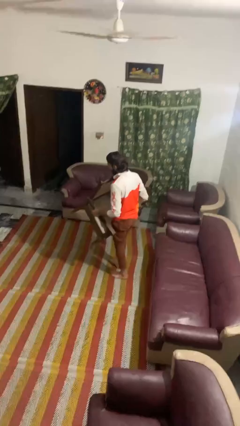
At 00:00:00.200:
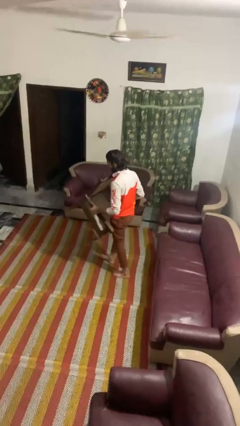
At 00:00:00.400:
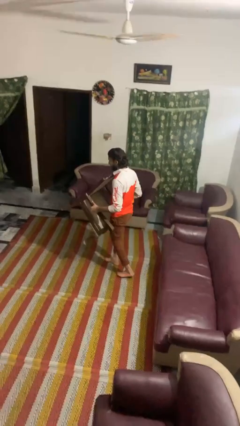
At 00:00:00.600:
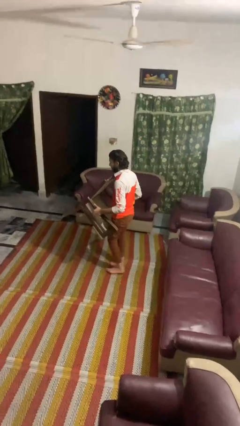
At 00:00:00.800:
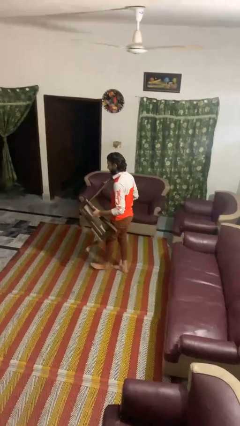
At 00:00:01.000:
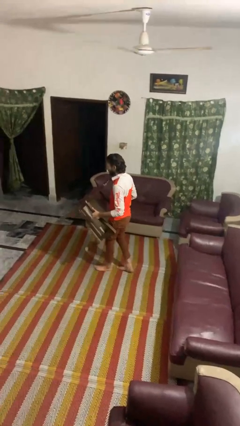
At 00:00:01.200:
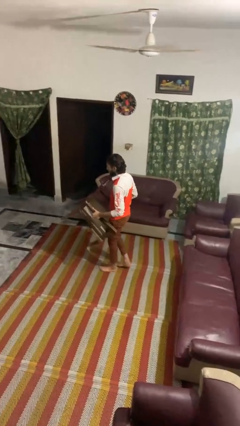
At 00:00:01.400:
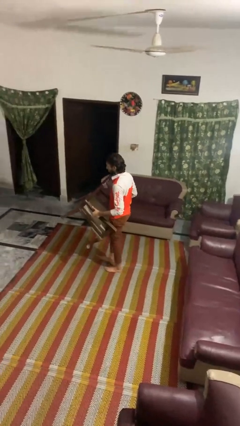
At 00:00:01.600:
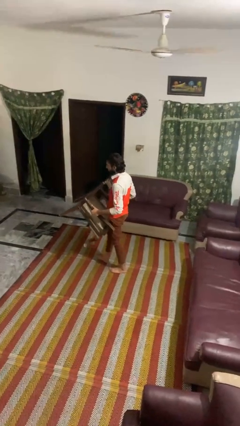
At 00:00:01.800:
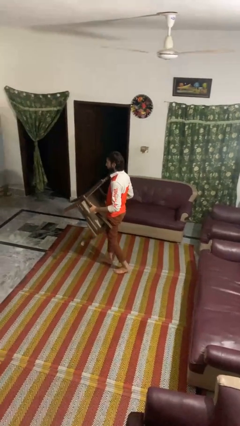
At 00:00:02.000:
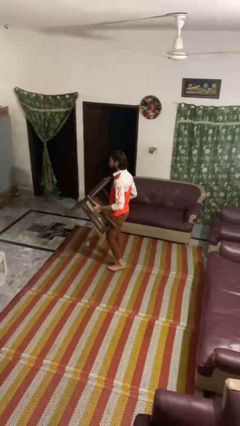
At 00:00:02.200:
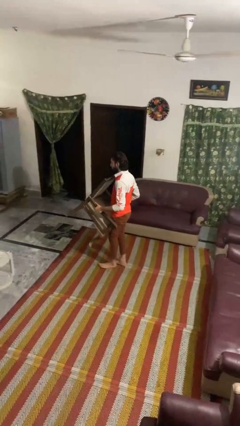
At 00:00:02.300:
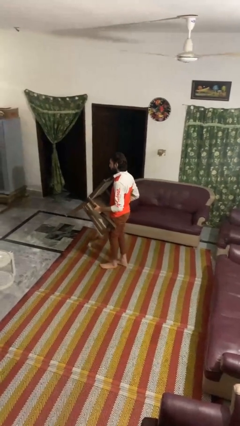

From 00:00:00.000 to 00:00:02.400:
person carries furniture

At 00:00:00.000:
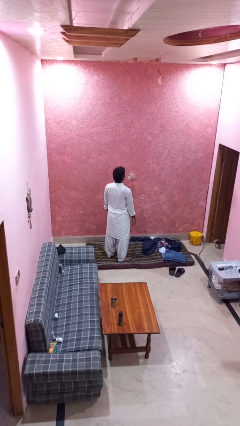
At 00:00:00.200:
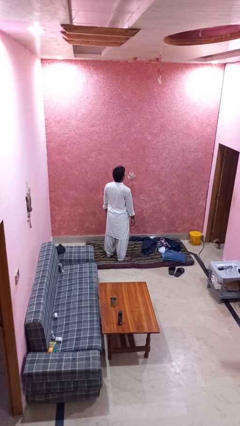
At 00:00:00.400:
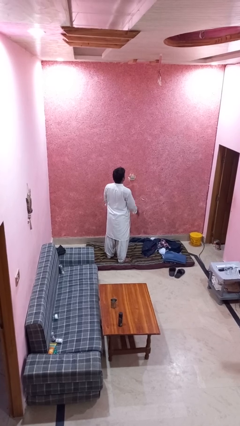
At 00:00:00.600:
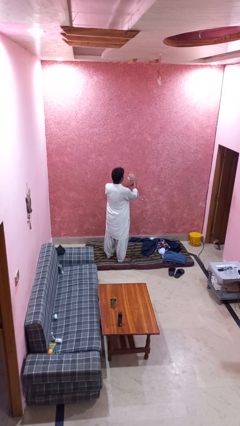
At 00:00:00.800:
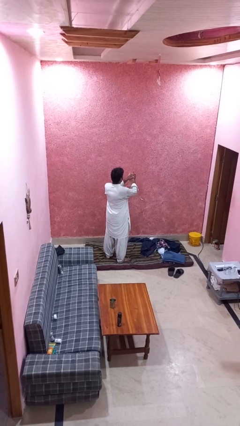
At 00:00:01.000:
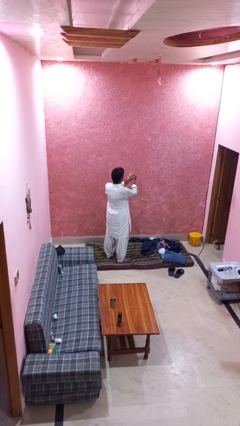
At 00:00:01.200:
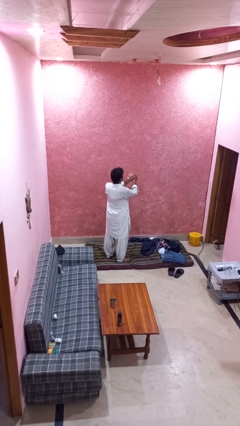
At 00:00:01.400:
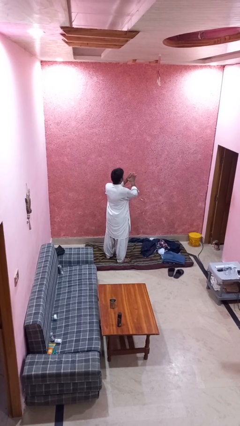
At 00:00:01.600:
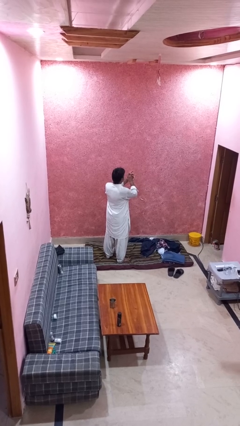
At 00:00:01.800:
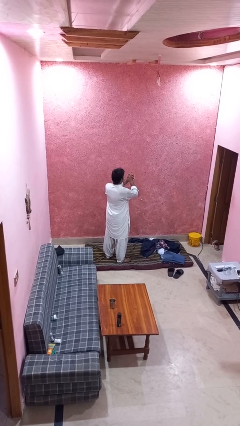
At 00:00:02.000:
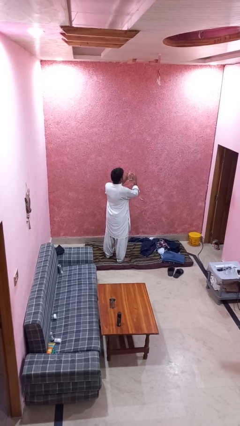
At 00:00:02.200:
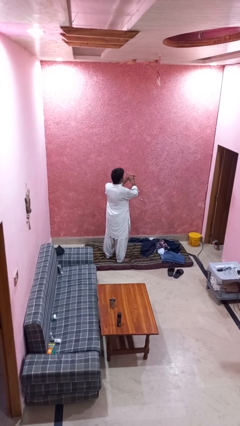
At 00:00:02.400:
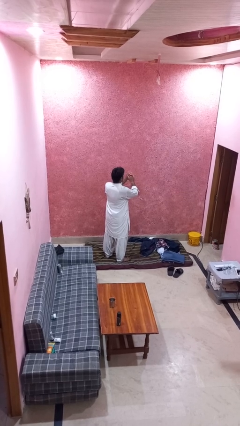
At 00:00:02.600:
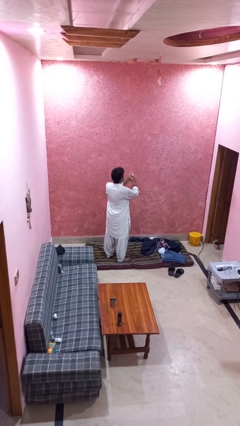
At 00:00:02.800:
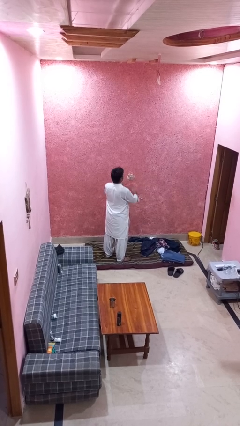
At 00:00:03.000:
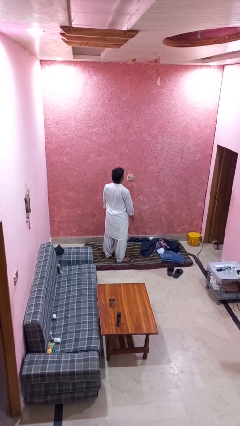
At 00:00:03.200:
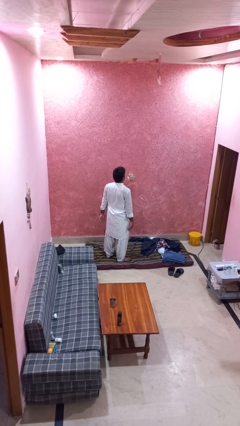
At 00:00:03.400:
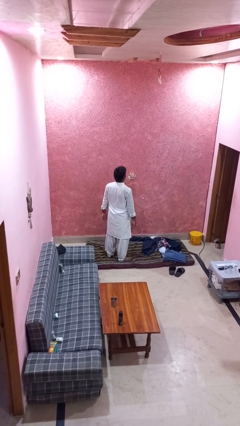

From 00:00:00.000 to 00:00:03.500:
person snaps fingers

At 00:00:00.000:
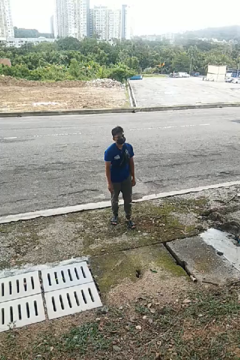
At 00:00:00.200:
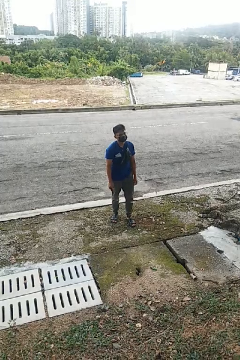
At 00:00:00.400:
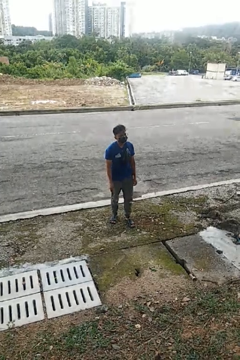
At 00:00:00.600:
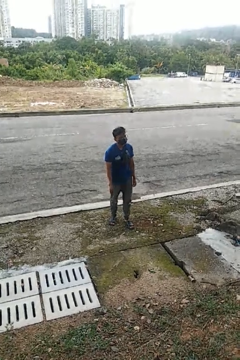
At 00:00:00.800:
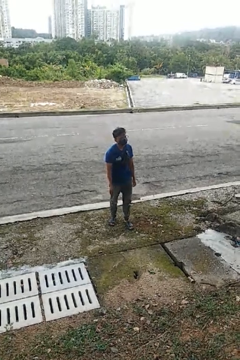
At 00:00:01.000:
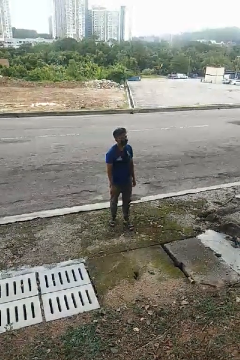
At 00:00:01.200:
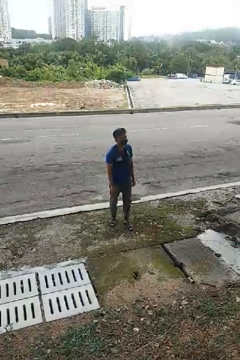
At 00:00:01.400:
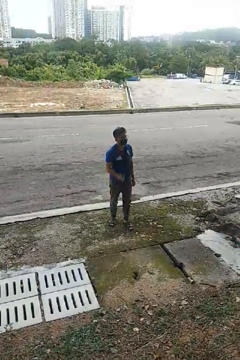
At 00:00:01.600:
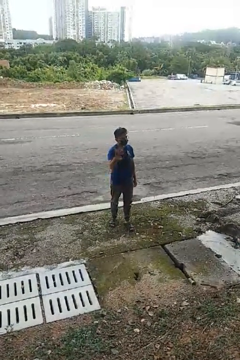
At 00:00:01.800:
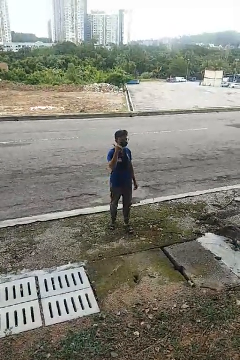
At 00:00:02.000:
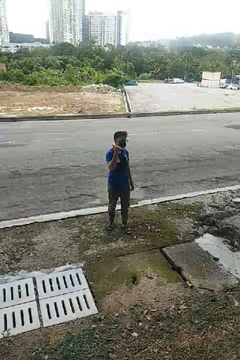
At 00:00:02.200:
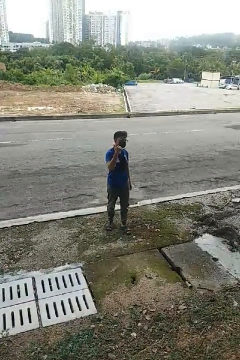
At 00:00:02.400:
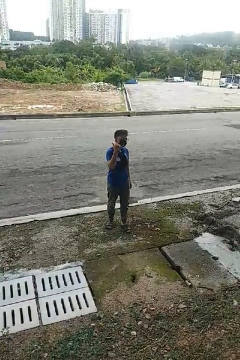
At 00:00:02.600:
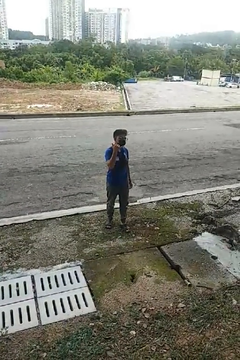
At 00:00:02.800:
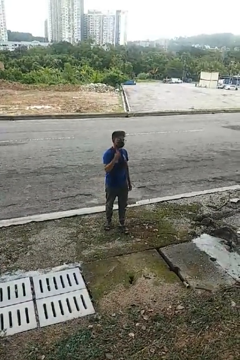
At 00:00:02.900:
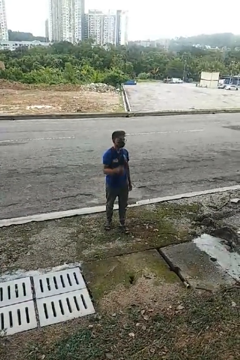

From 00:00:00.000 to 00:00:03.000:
person gestures hang loose

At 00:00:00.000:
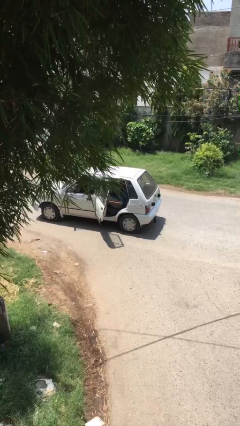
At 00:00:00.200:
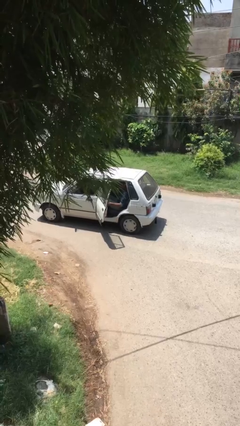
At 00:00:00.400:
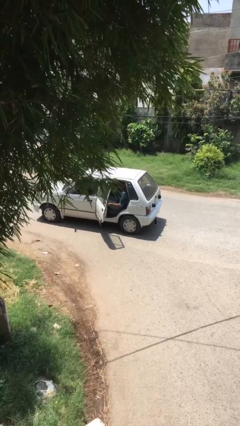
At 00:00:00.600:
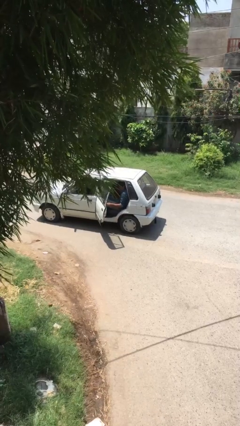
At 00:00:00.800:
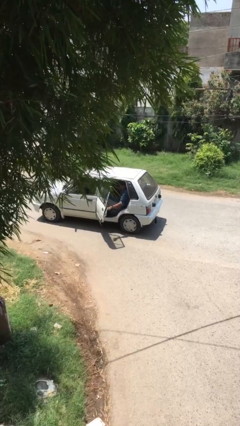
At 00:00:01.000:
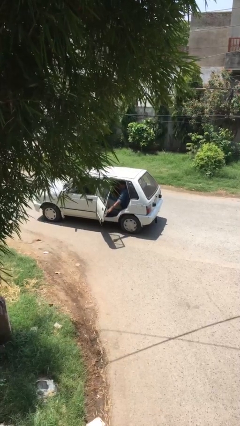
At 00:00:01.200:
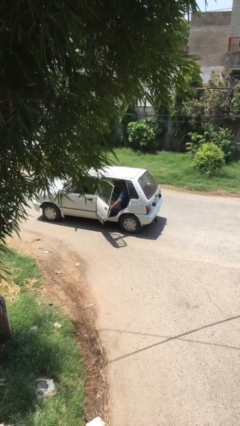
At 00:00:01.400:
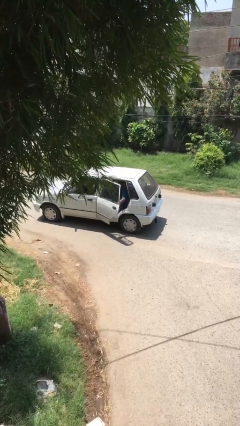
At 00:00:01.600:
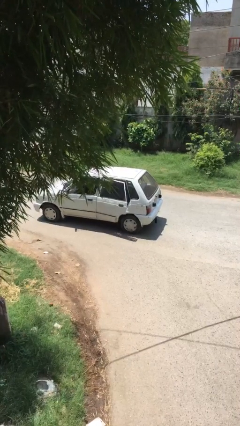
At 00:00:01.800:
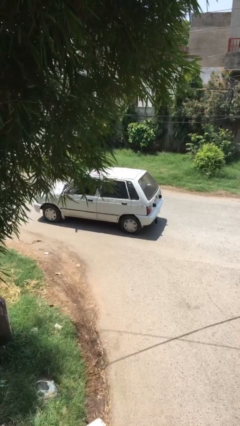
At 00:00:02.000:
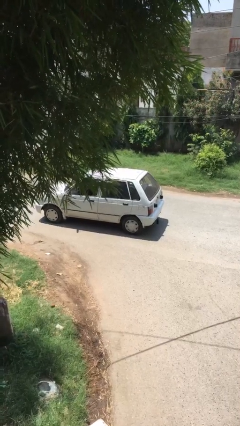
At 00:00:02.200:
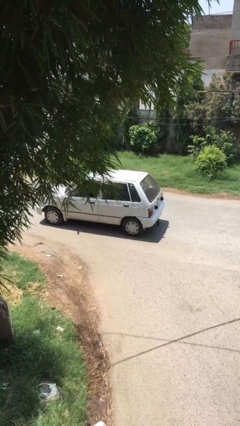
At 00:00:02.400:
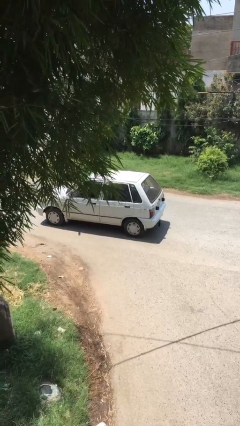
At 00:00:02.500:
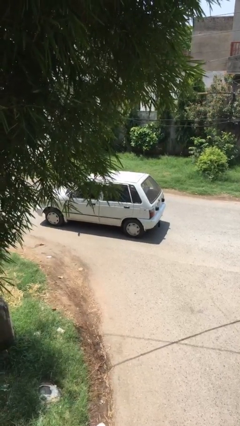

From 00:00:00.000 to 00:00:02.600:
person closes car door

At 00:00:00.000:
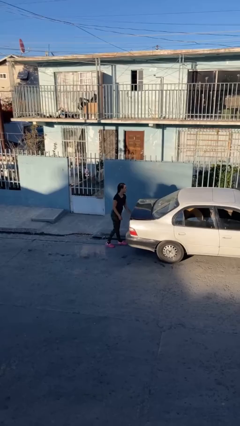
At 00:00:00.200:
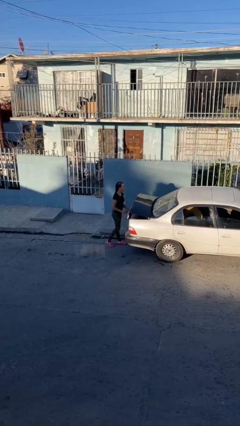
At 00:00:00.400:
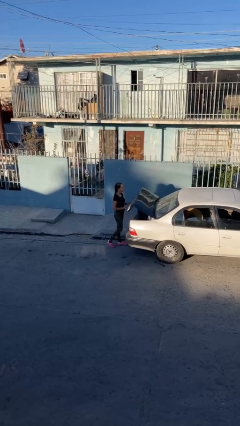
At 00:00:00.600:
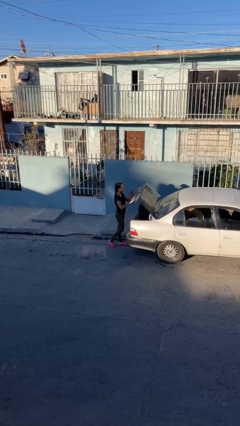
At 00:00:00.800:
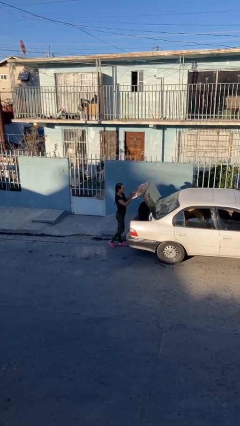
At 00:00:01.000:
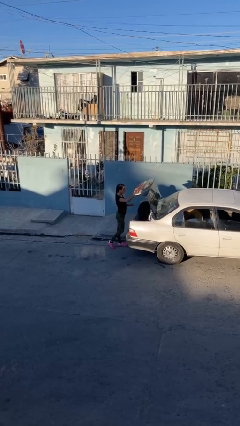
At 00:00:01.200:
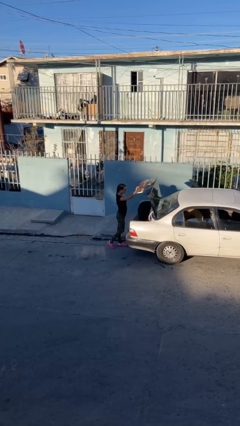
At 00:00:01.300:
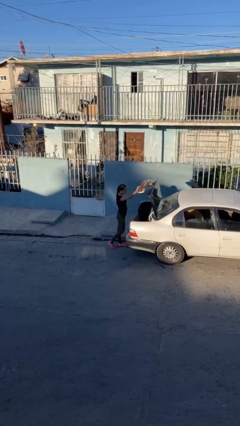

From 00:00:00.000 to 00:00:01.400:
person opens car trunk

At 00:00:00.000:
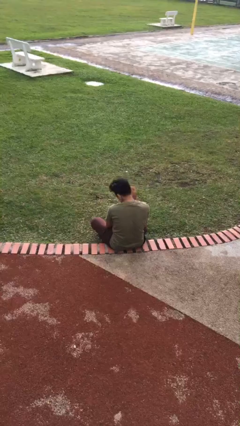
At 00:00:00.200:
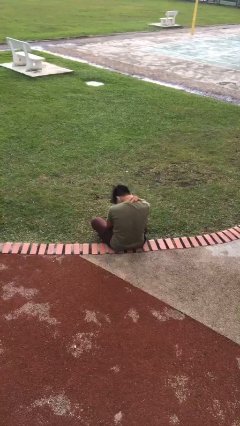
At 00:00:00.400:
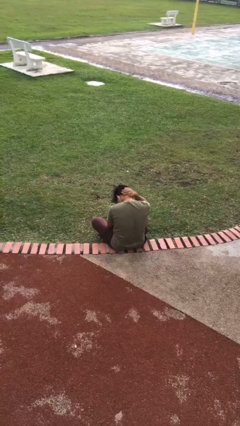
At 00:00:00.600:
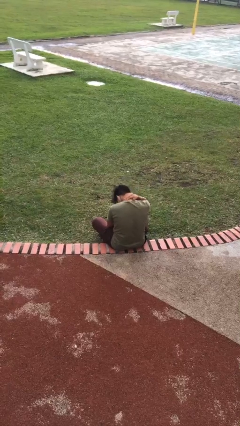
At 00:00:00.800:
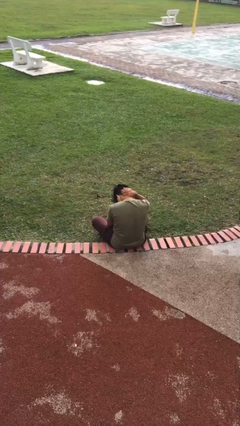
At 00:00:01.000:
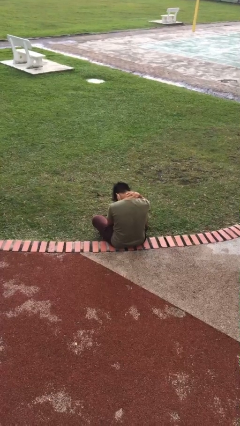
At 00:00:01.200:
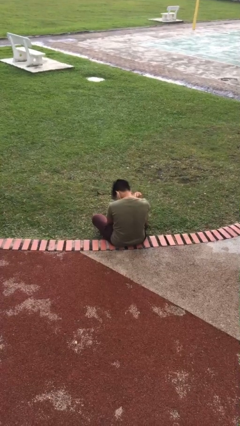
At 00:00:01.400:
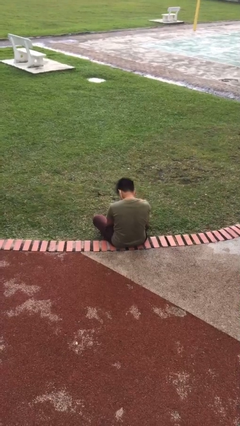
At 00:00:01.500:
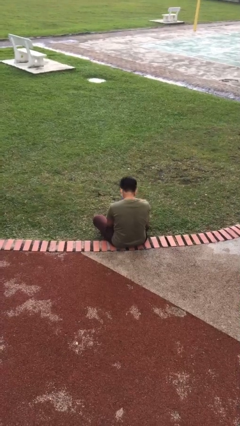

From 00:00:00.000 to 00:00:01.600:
person rubs neck

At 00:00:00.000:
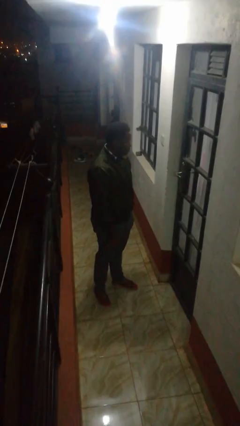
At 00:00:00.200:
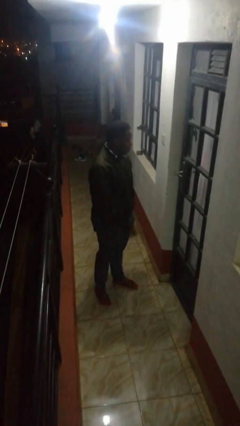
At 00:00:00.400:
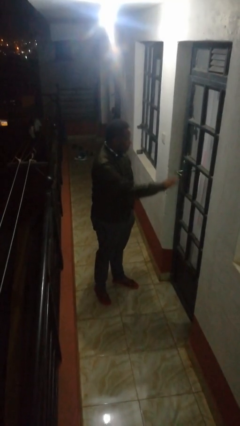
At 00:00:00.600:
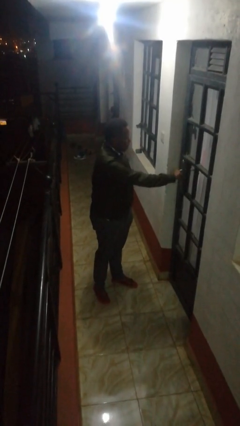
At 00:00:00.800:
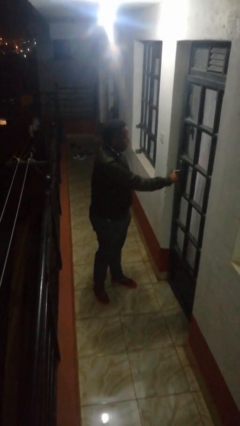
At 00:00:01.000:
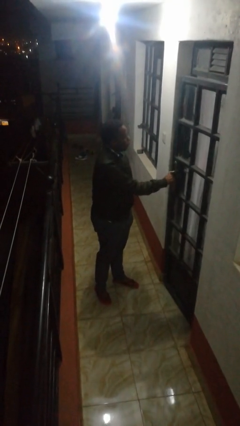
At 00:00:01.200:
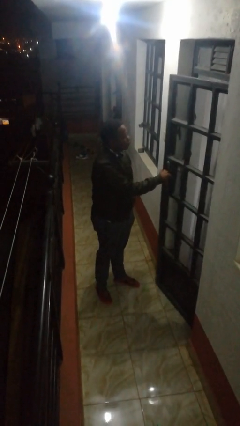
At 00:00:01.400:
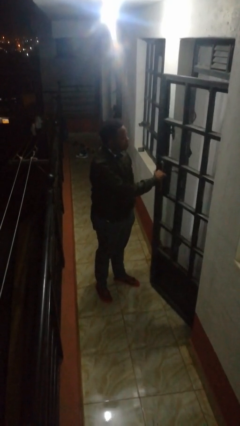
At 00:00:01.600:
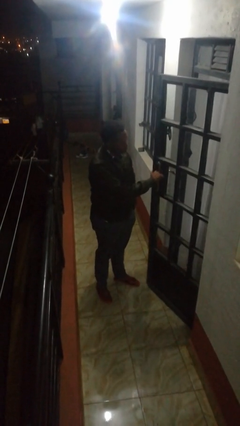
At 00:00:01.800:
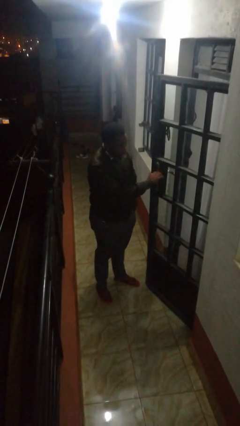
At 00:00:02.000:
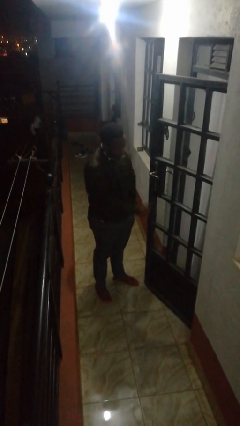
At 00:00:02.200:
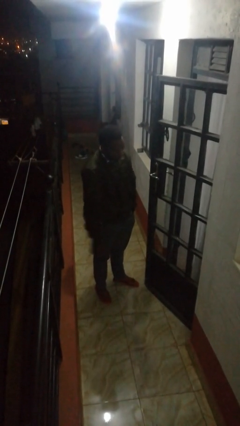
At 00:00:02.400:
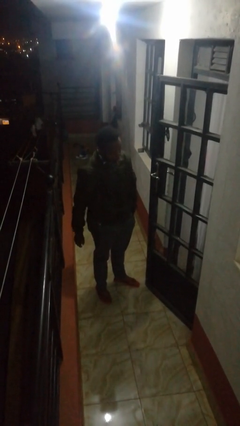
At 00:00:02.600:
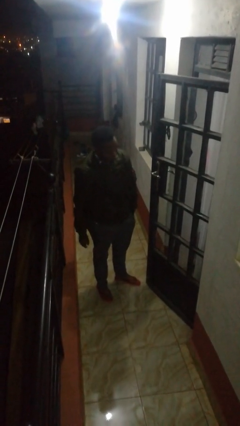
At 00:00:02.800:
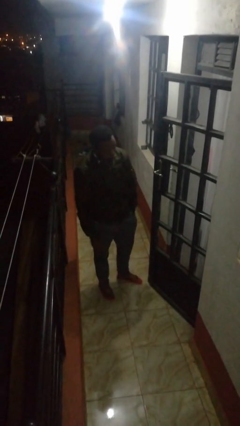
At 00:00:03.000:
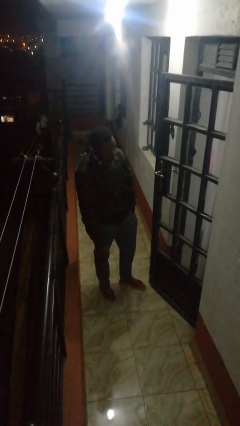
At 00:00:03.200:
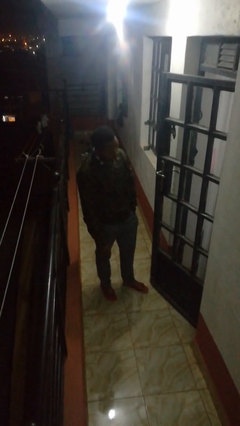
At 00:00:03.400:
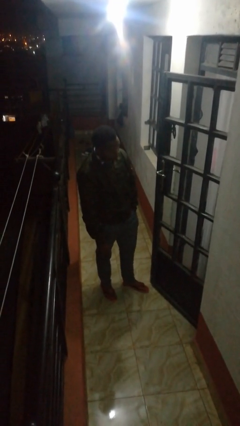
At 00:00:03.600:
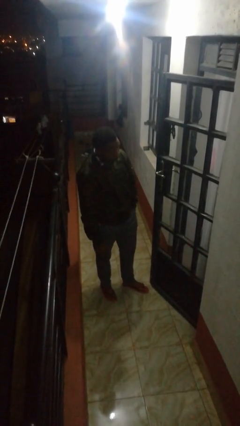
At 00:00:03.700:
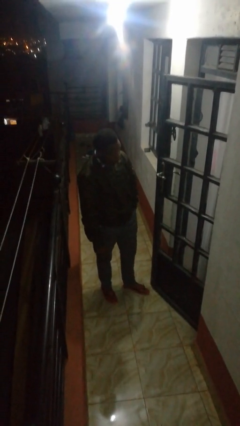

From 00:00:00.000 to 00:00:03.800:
person opens facility door
